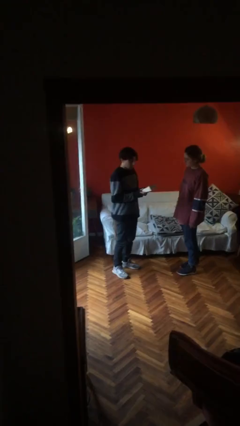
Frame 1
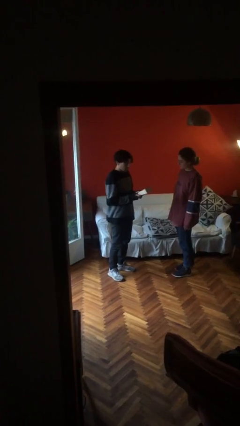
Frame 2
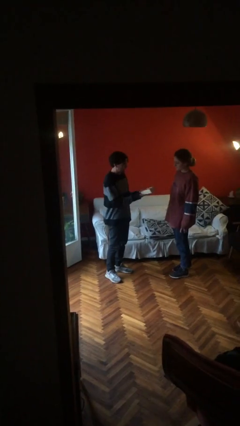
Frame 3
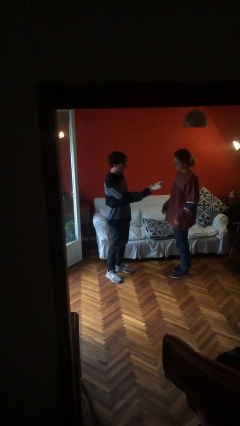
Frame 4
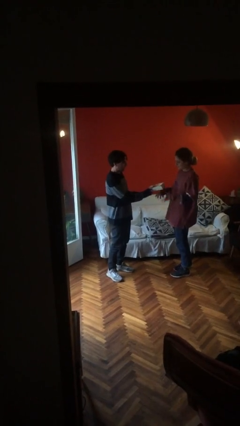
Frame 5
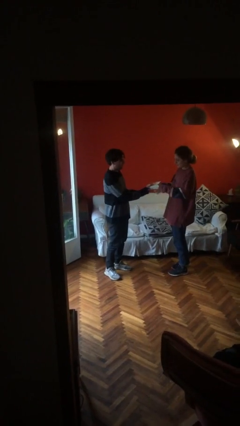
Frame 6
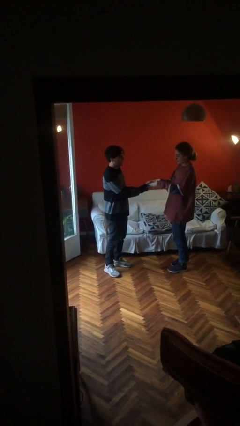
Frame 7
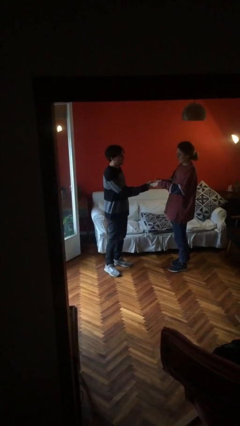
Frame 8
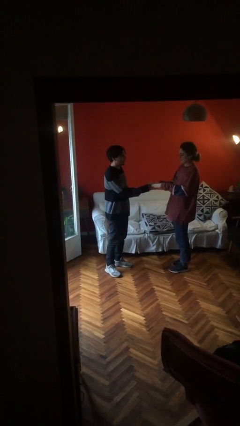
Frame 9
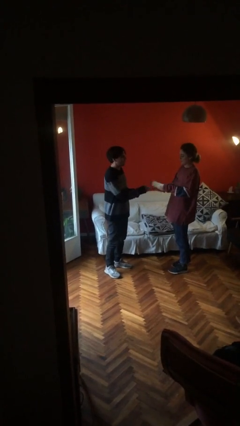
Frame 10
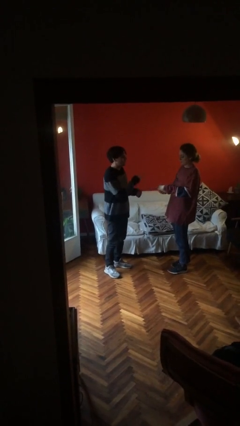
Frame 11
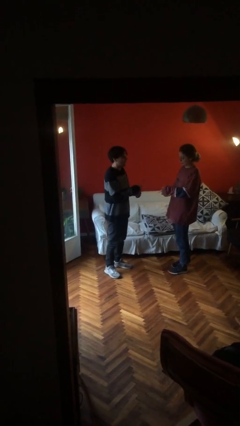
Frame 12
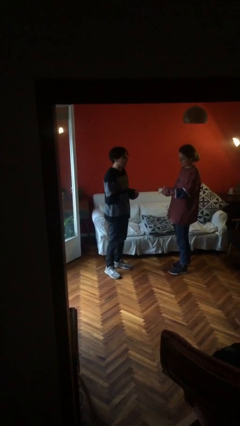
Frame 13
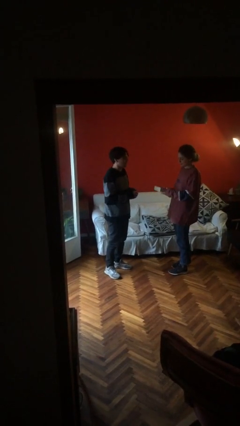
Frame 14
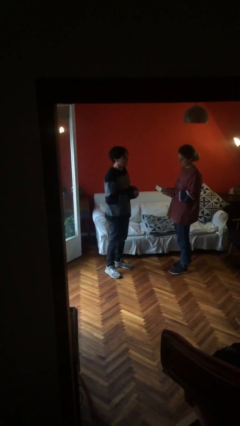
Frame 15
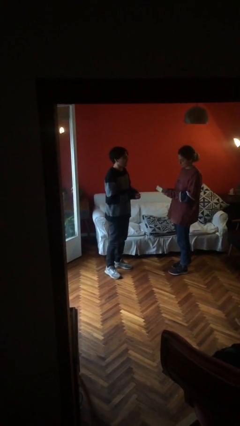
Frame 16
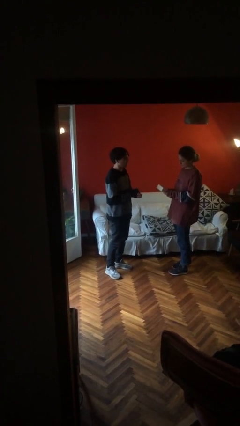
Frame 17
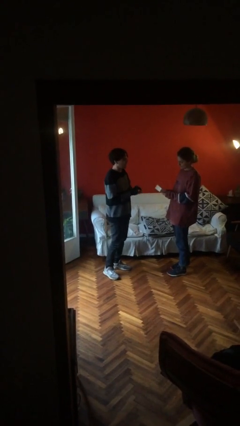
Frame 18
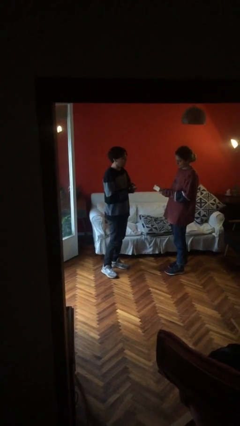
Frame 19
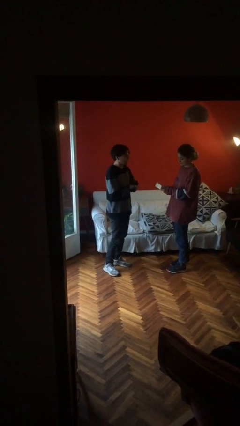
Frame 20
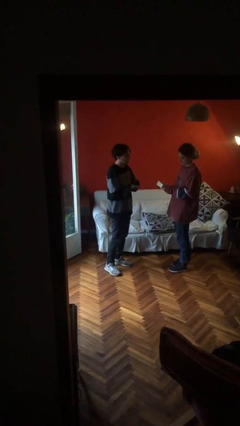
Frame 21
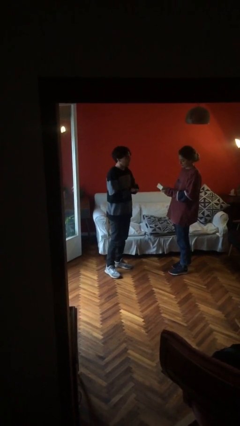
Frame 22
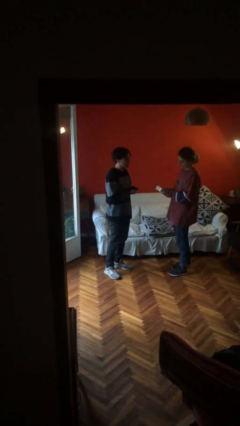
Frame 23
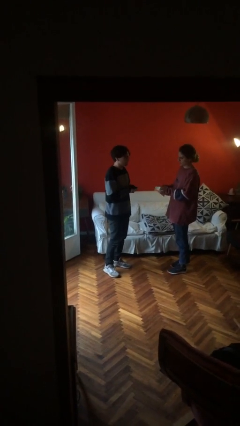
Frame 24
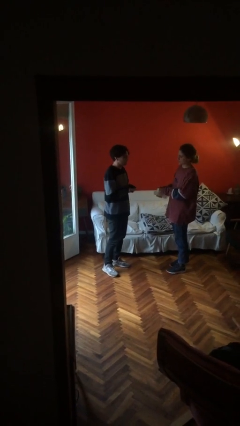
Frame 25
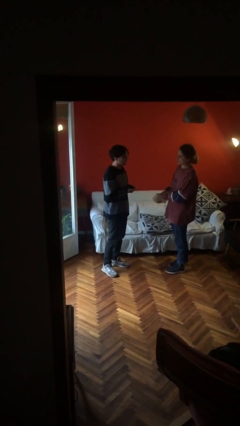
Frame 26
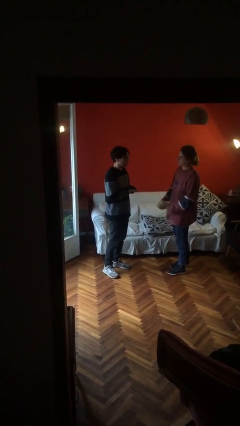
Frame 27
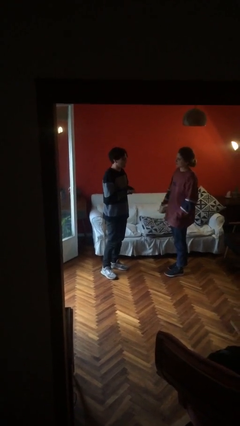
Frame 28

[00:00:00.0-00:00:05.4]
person transfers object to person

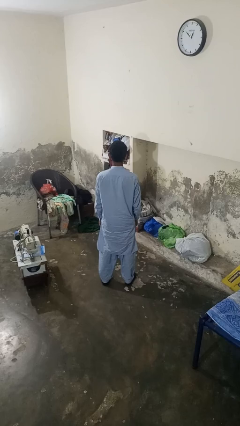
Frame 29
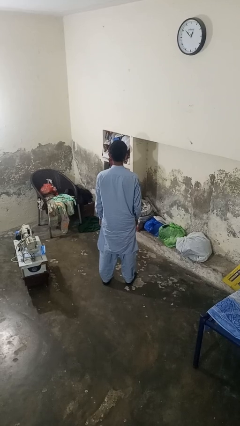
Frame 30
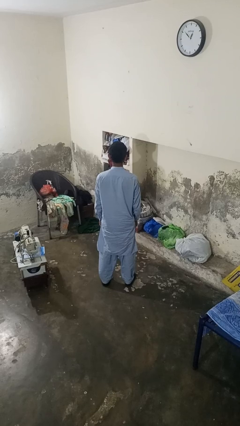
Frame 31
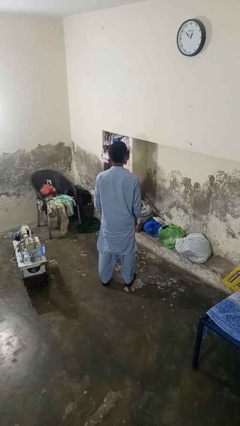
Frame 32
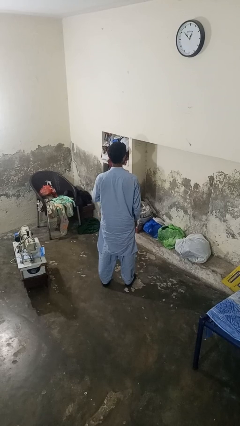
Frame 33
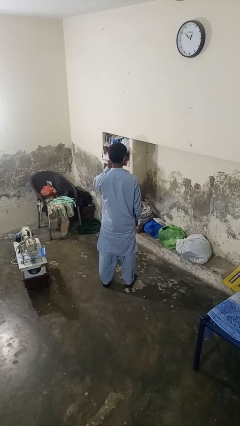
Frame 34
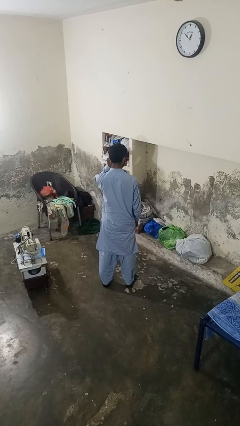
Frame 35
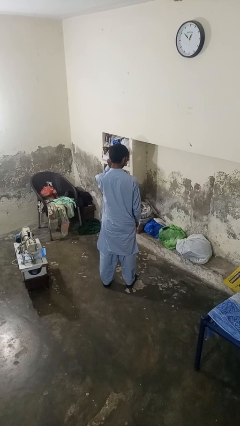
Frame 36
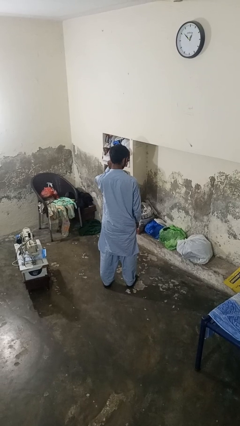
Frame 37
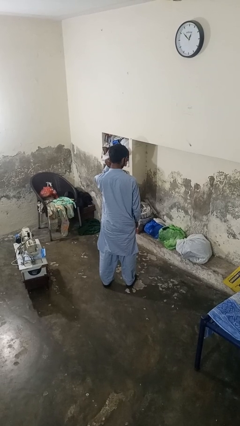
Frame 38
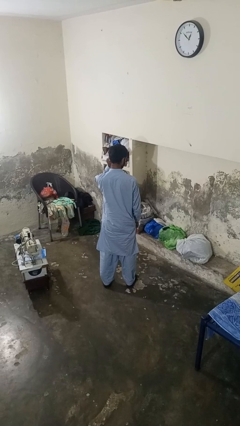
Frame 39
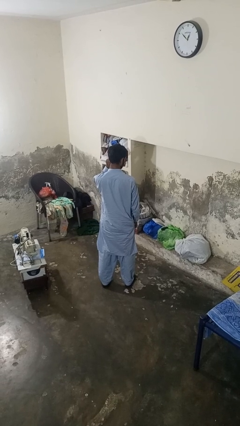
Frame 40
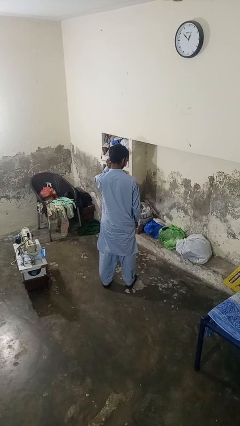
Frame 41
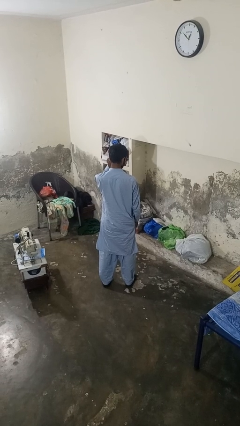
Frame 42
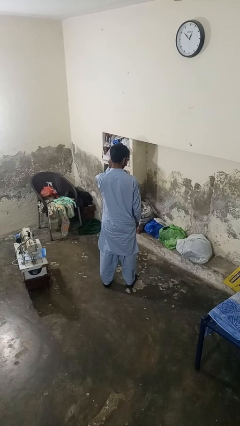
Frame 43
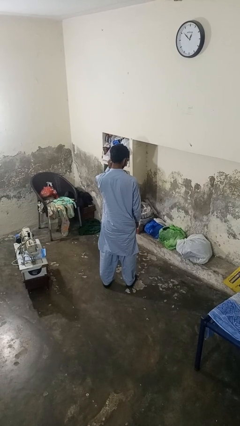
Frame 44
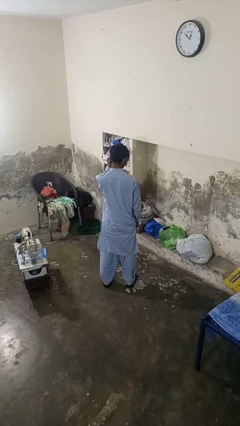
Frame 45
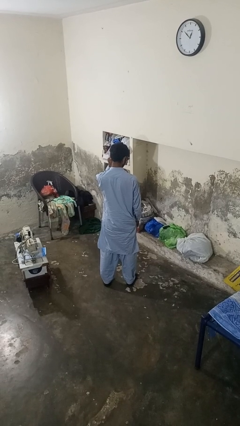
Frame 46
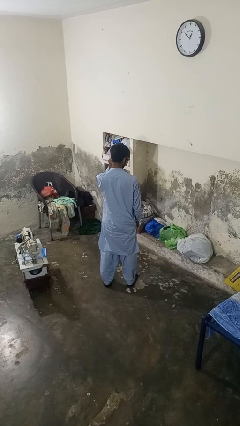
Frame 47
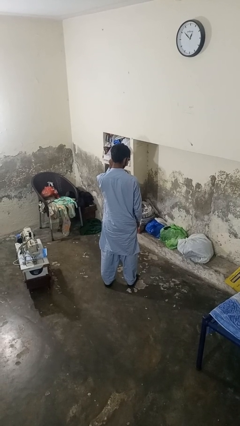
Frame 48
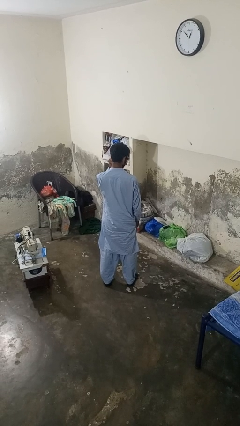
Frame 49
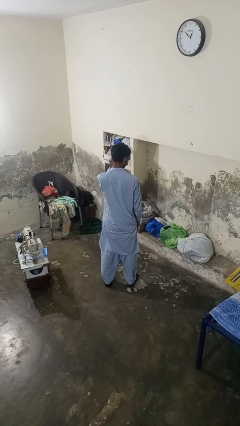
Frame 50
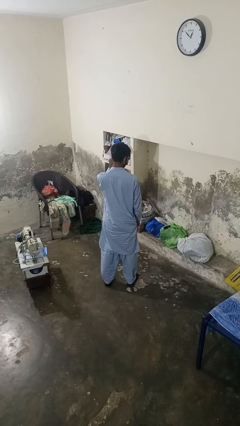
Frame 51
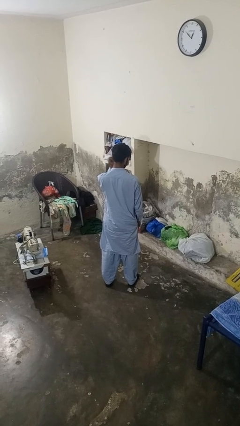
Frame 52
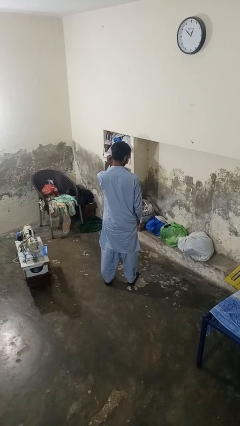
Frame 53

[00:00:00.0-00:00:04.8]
person touches earlobe

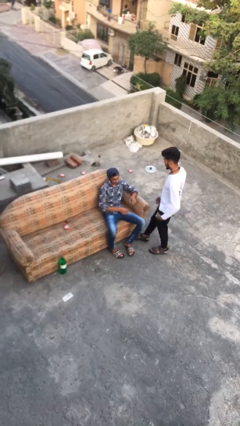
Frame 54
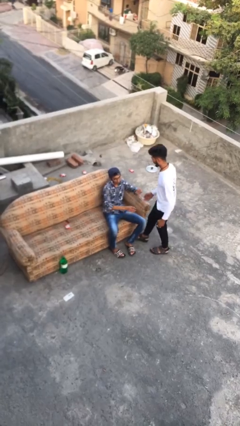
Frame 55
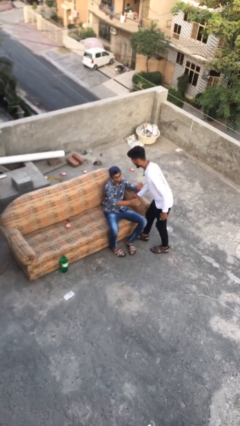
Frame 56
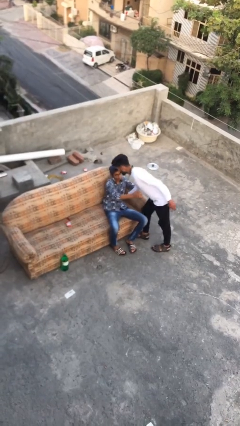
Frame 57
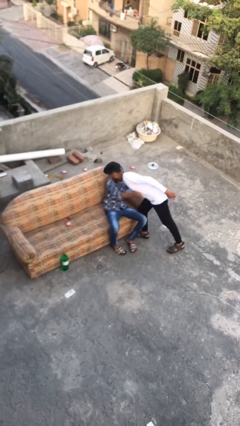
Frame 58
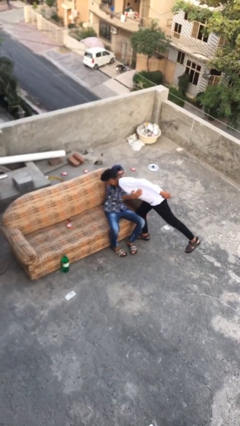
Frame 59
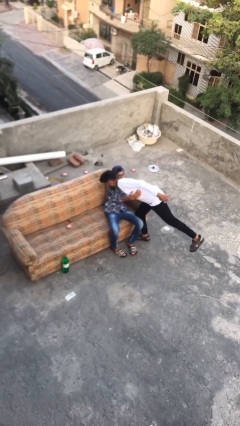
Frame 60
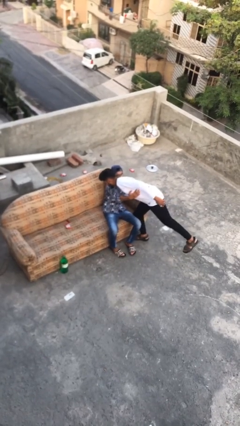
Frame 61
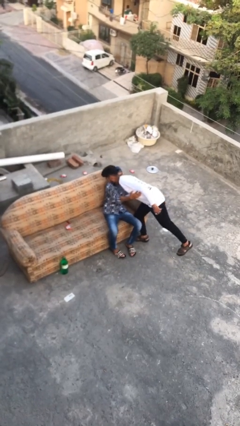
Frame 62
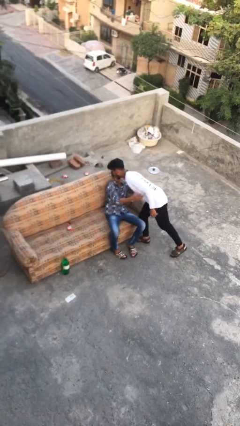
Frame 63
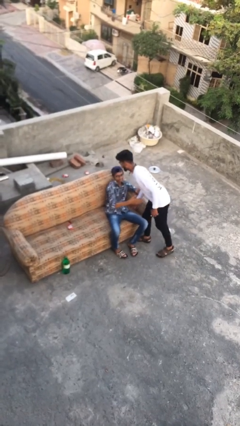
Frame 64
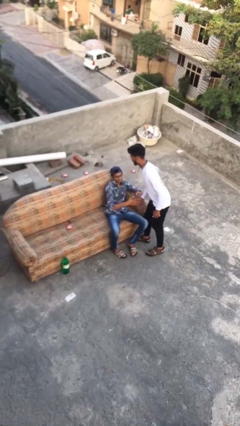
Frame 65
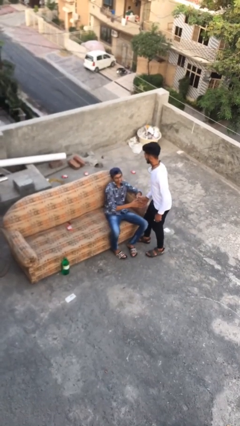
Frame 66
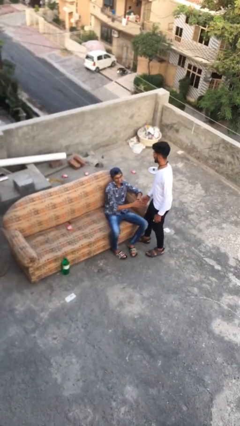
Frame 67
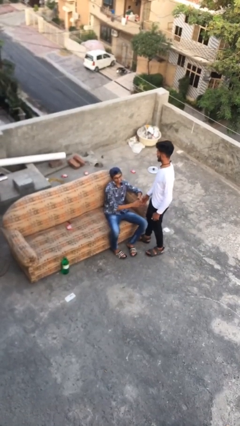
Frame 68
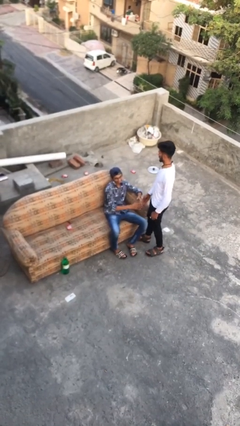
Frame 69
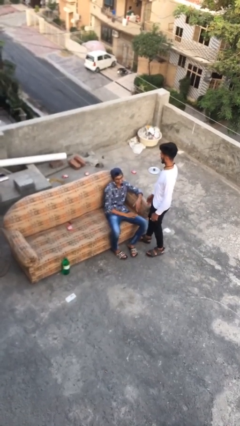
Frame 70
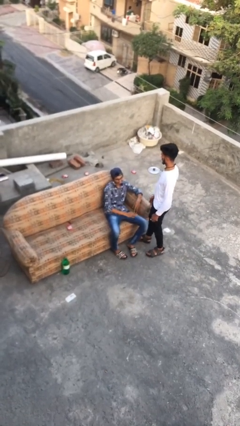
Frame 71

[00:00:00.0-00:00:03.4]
person embraces person

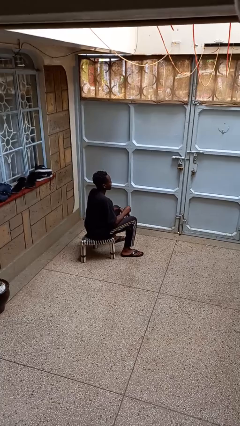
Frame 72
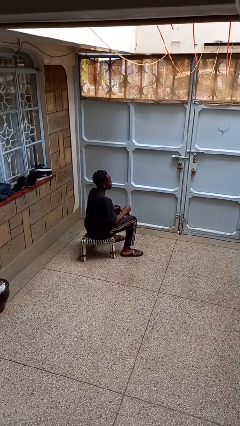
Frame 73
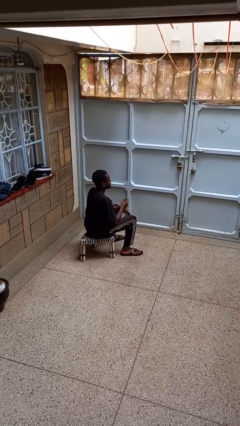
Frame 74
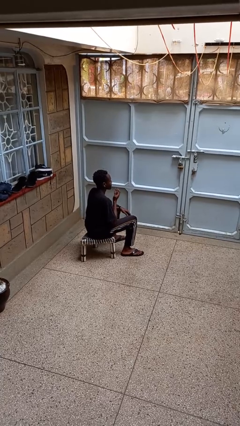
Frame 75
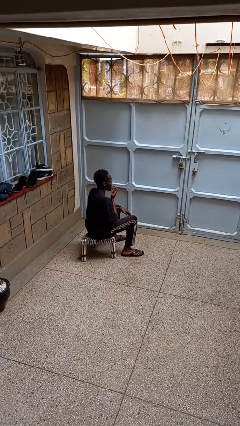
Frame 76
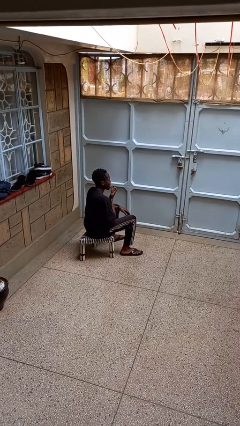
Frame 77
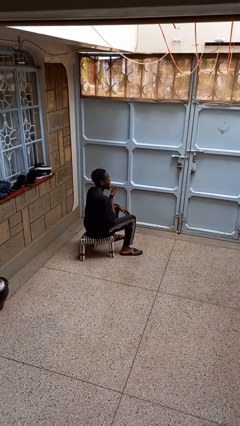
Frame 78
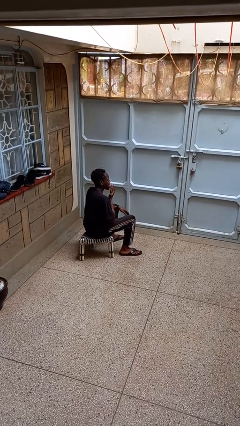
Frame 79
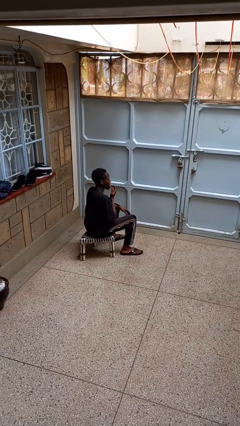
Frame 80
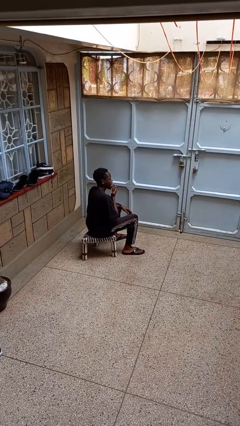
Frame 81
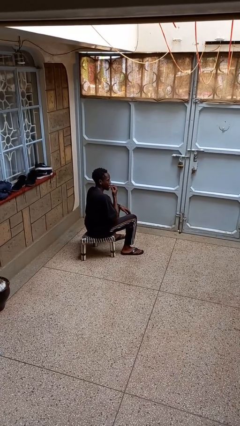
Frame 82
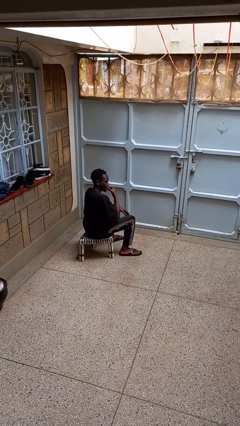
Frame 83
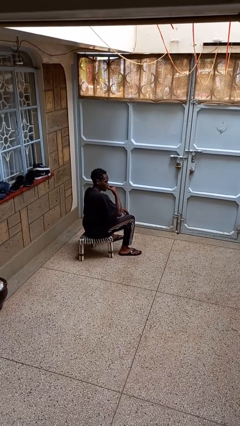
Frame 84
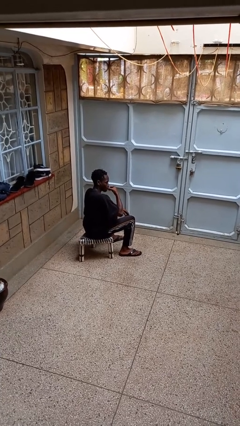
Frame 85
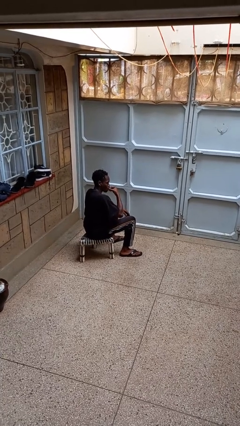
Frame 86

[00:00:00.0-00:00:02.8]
person licks fingers

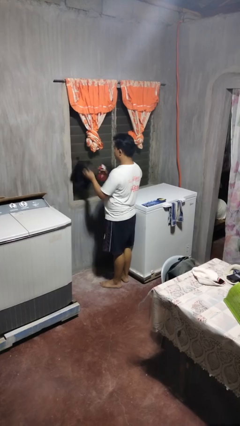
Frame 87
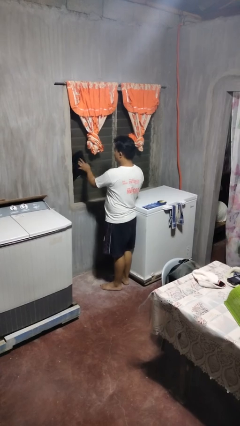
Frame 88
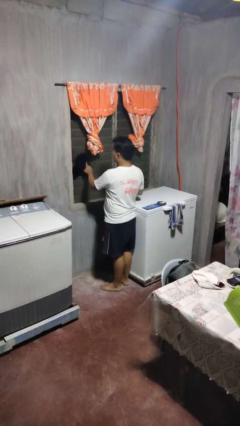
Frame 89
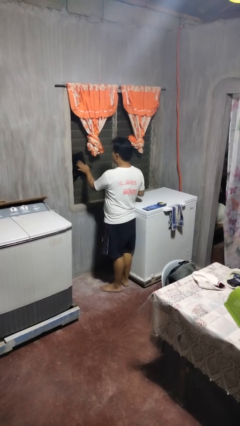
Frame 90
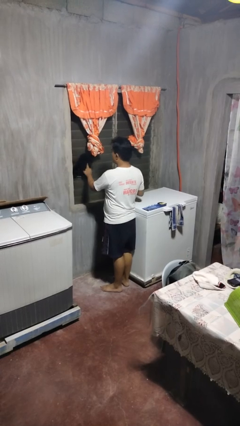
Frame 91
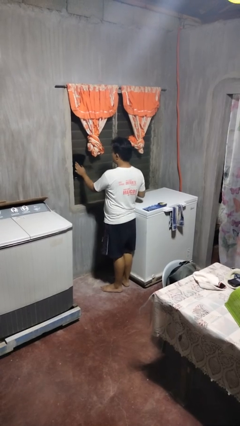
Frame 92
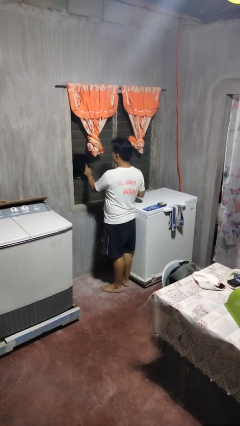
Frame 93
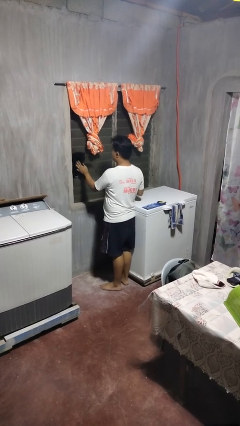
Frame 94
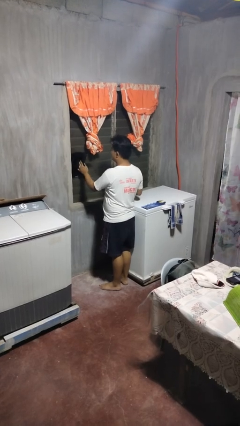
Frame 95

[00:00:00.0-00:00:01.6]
person washes window
